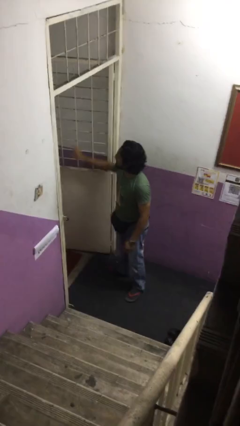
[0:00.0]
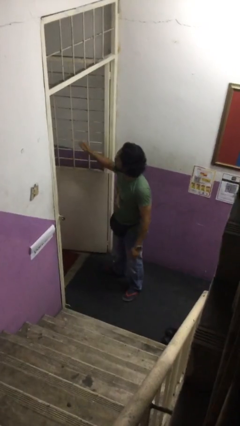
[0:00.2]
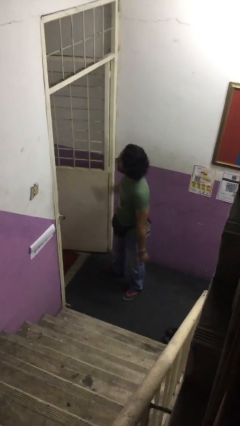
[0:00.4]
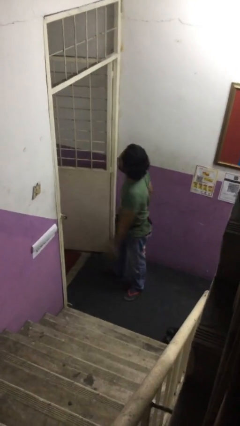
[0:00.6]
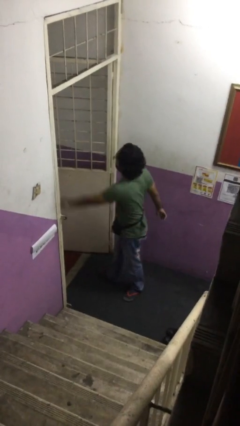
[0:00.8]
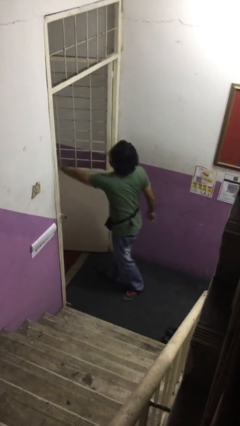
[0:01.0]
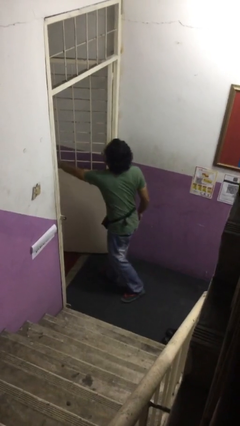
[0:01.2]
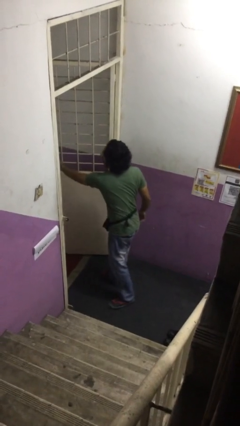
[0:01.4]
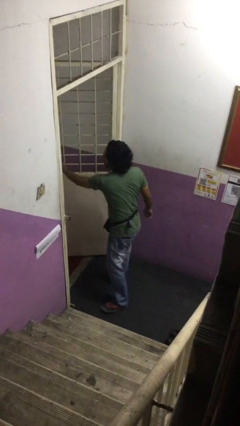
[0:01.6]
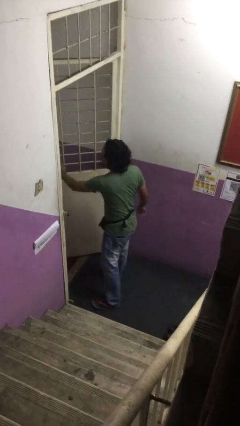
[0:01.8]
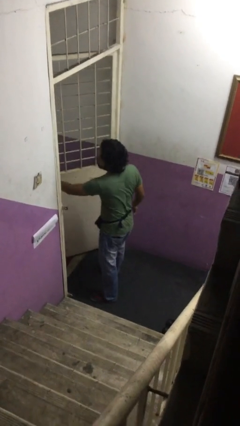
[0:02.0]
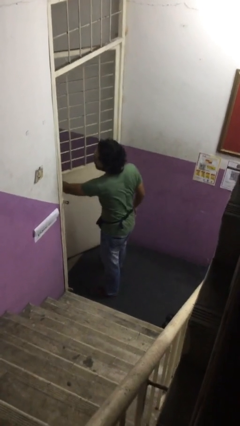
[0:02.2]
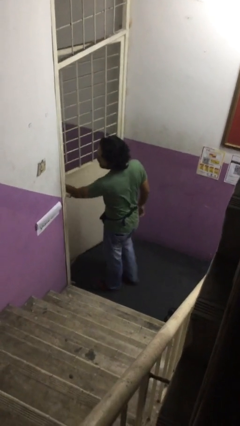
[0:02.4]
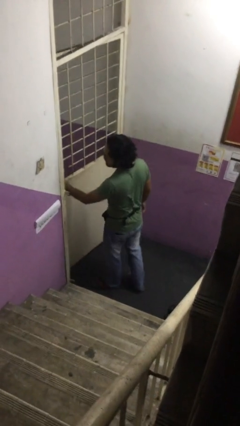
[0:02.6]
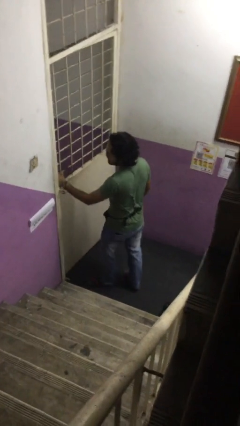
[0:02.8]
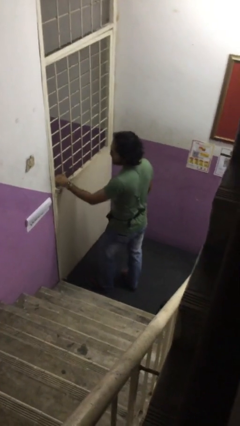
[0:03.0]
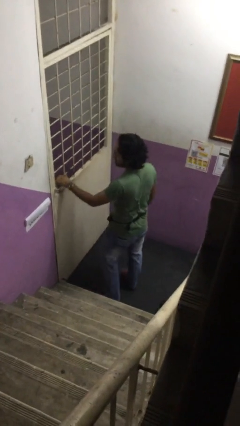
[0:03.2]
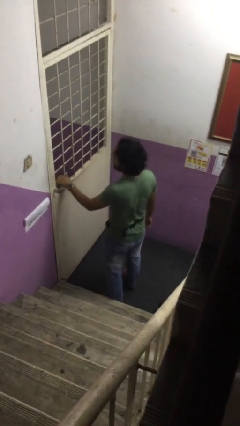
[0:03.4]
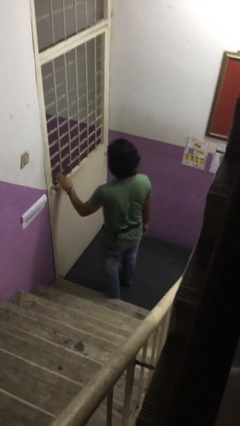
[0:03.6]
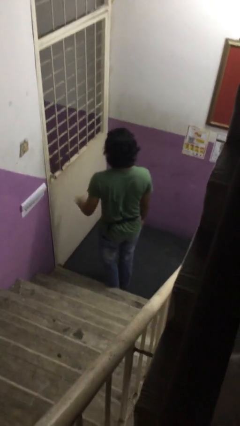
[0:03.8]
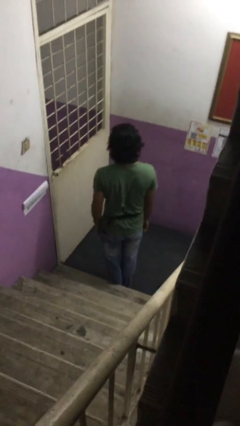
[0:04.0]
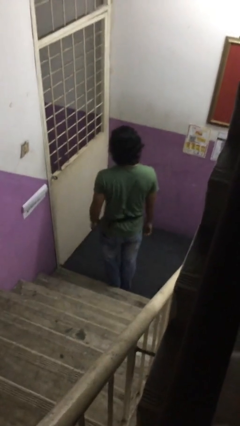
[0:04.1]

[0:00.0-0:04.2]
person closes facility door

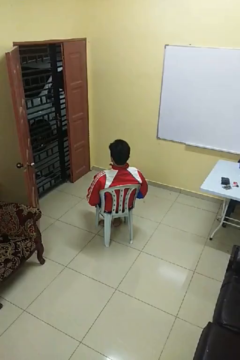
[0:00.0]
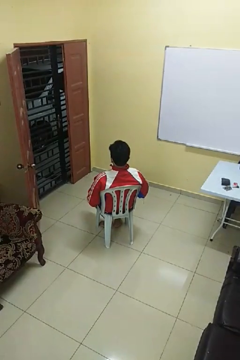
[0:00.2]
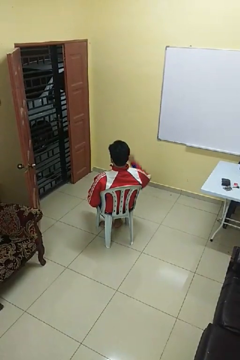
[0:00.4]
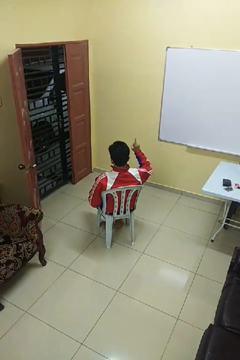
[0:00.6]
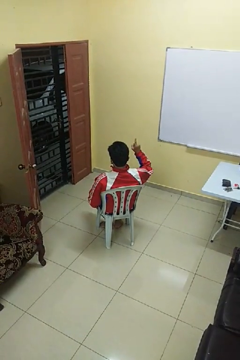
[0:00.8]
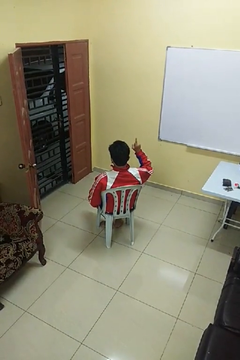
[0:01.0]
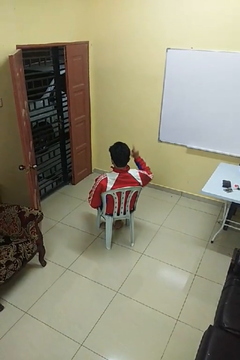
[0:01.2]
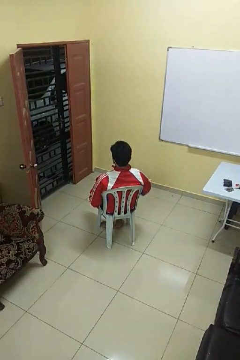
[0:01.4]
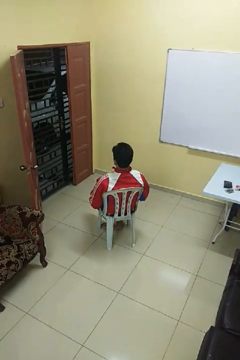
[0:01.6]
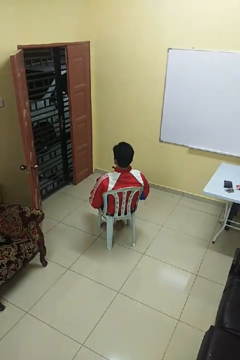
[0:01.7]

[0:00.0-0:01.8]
person gestures number one

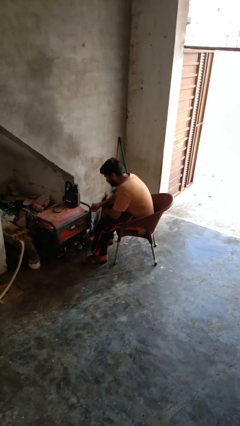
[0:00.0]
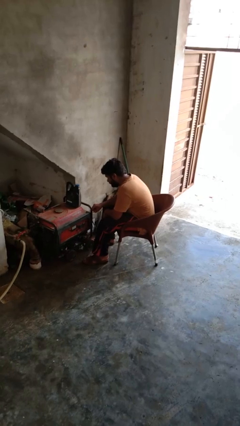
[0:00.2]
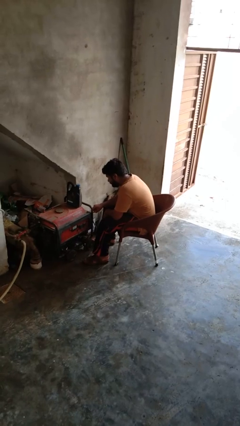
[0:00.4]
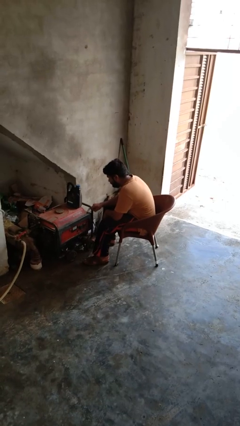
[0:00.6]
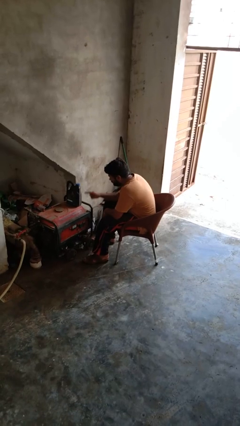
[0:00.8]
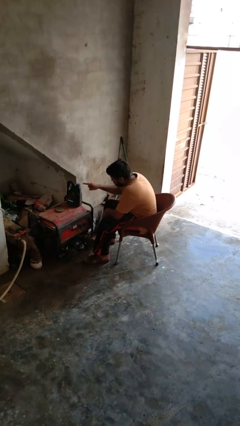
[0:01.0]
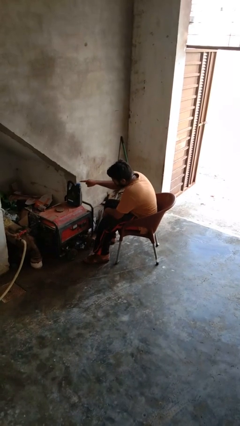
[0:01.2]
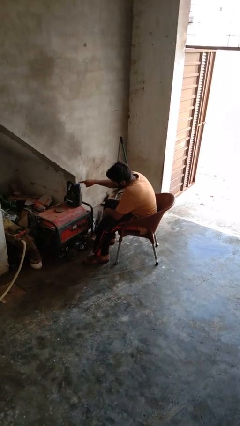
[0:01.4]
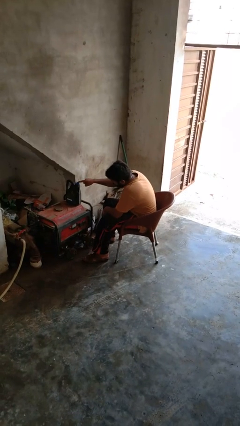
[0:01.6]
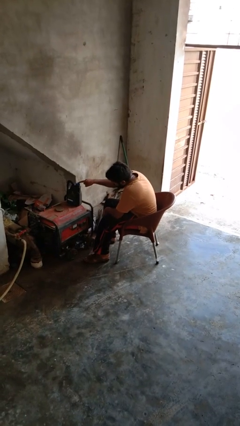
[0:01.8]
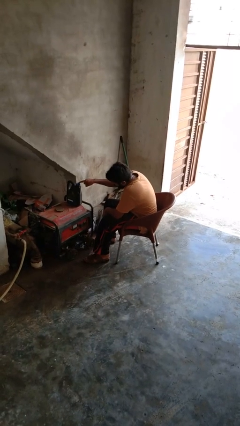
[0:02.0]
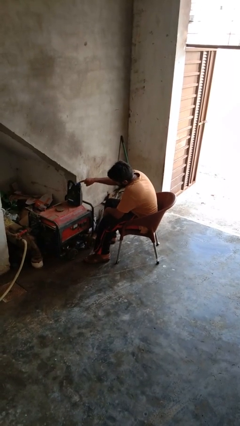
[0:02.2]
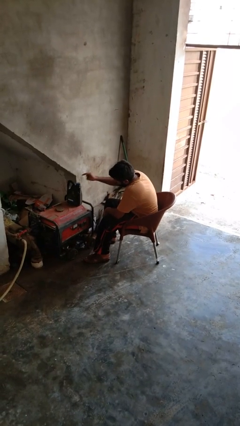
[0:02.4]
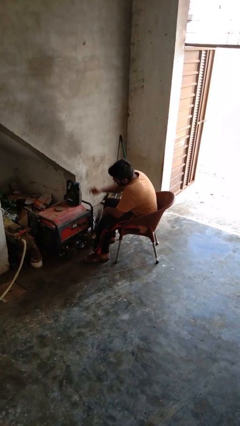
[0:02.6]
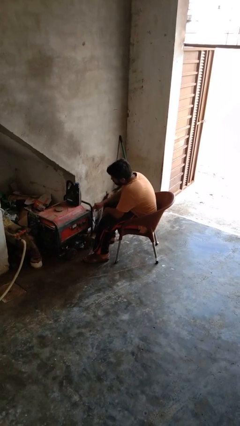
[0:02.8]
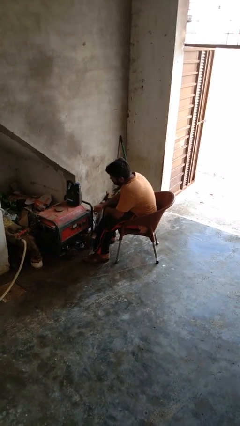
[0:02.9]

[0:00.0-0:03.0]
person taps object with finger

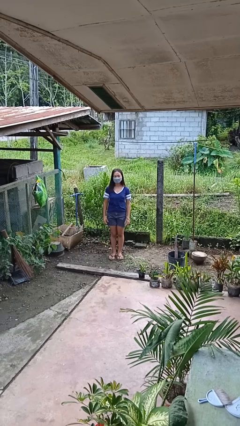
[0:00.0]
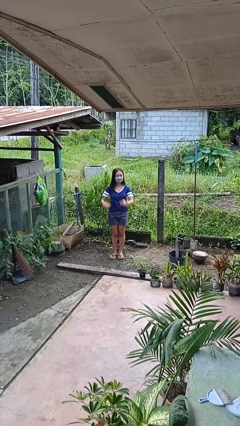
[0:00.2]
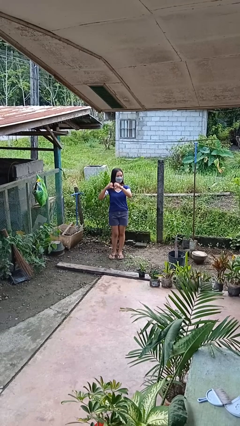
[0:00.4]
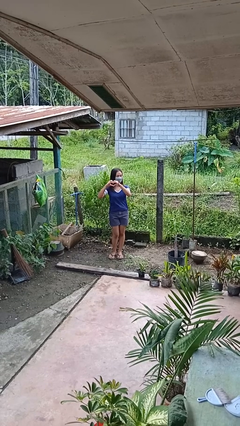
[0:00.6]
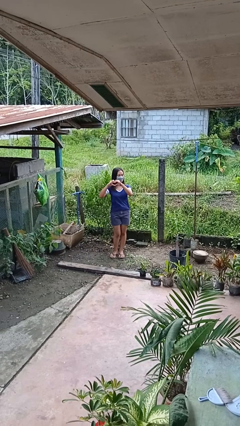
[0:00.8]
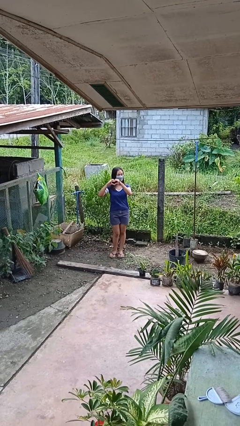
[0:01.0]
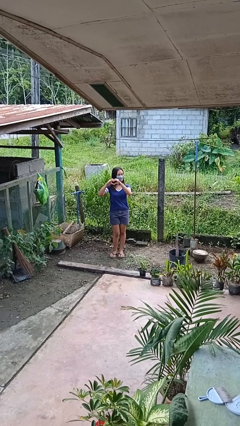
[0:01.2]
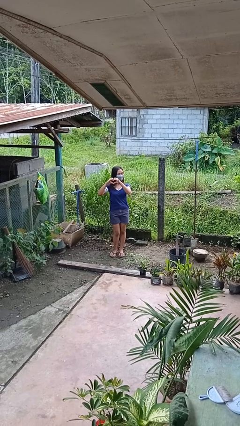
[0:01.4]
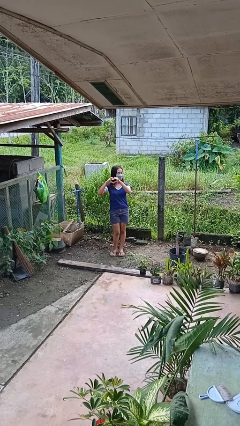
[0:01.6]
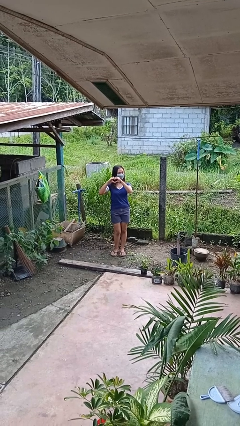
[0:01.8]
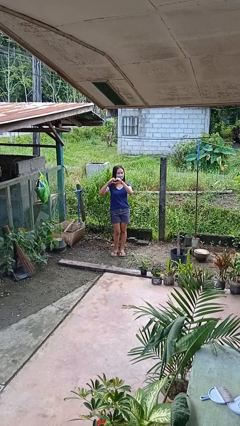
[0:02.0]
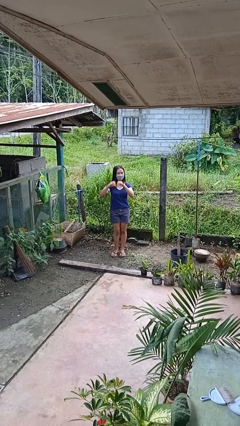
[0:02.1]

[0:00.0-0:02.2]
person gestures heart

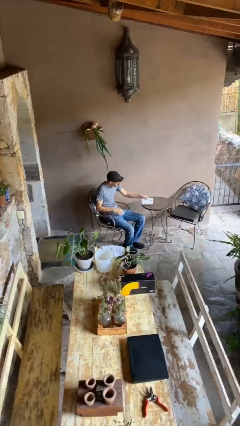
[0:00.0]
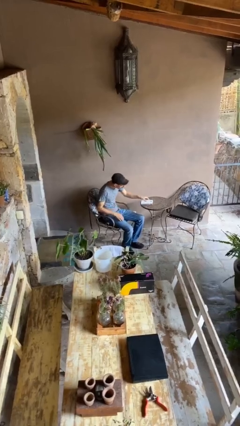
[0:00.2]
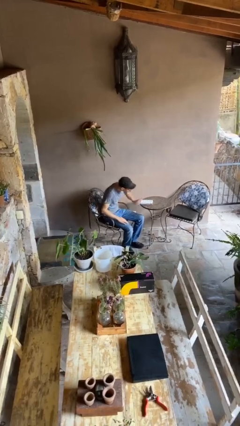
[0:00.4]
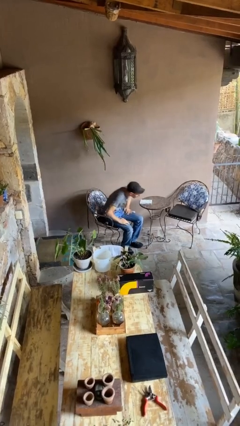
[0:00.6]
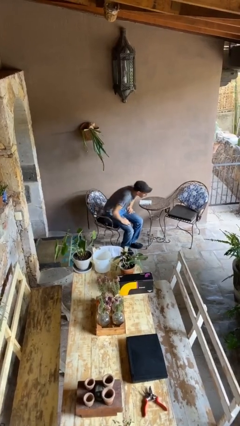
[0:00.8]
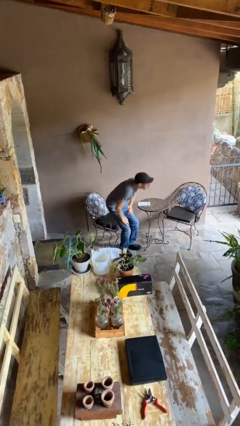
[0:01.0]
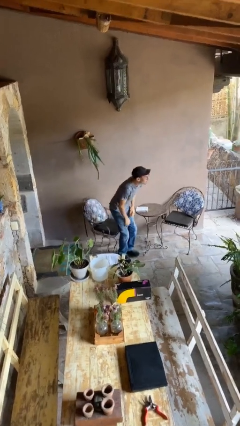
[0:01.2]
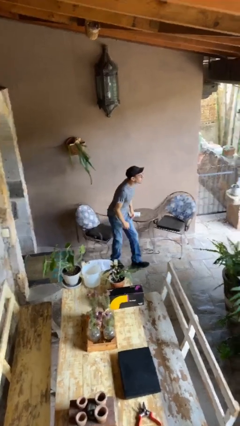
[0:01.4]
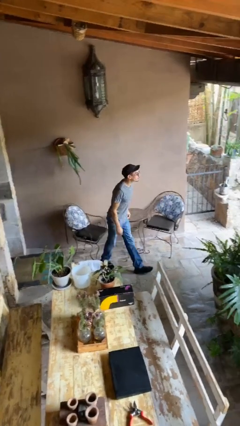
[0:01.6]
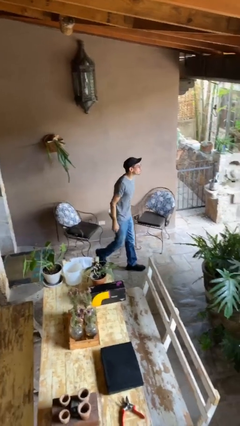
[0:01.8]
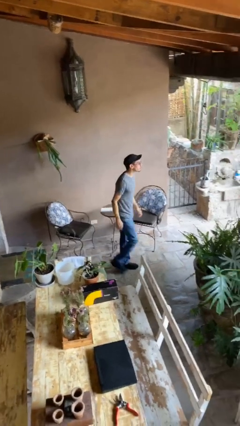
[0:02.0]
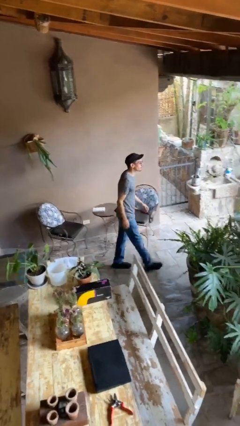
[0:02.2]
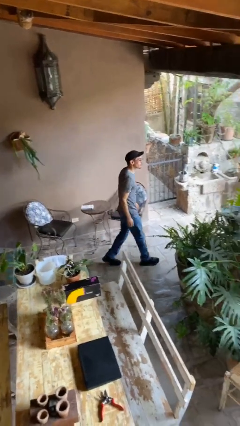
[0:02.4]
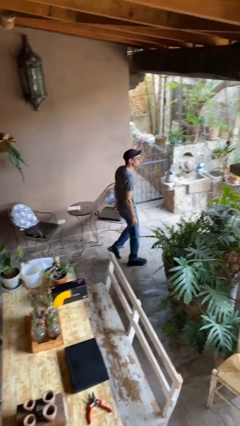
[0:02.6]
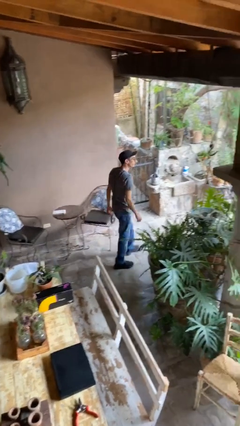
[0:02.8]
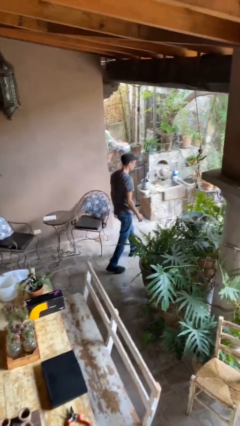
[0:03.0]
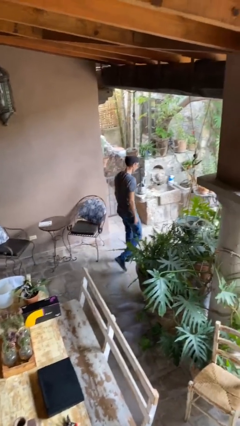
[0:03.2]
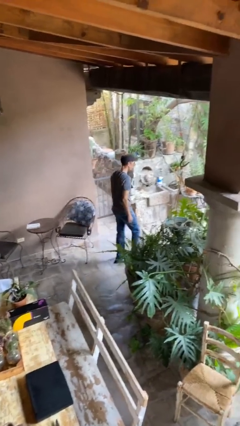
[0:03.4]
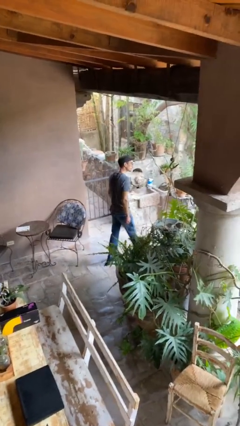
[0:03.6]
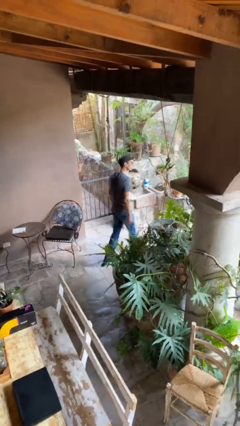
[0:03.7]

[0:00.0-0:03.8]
person stands up

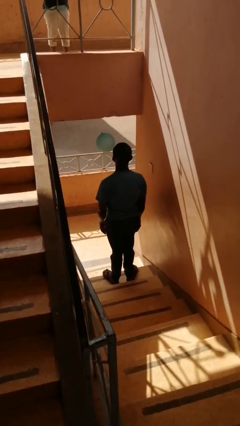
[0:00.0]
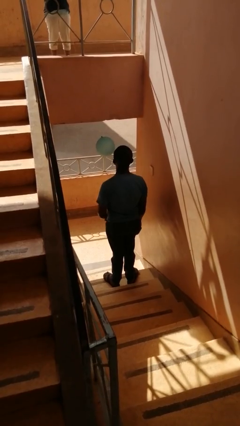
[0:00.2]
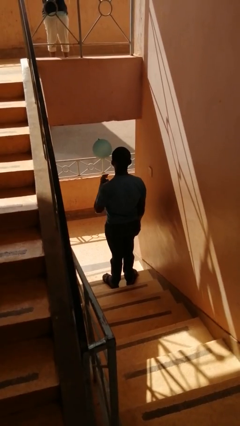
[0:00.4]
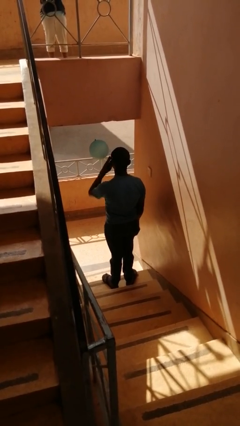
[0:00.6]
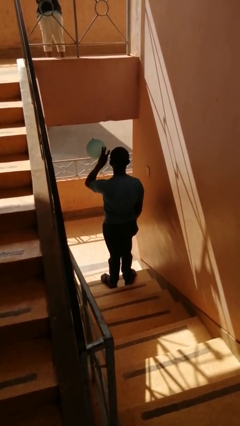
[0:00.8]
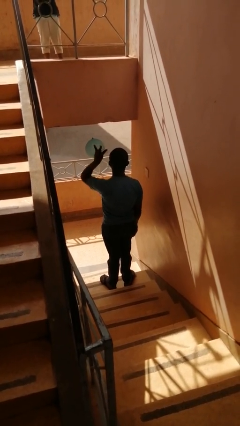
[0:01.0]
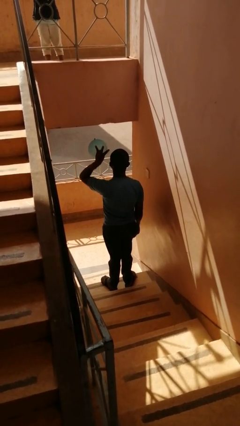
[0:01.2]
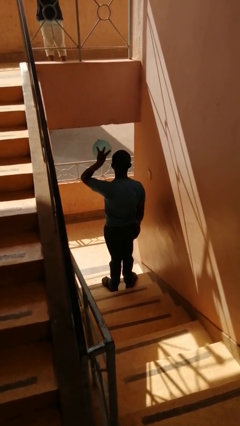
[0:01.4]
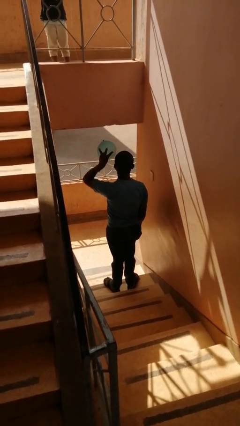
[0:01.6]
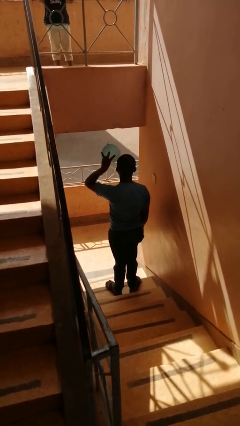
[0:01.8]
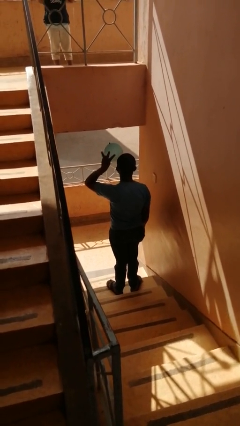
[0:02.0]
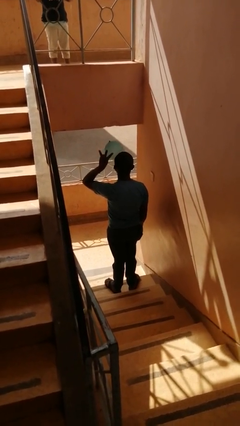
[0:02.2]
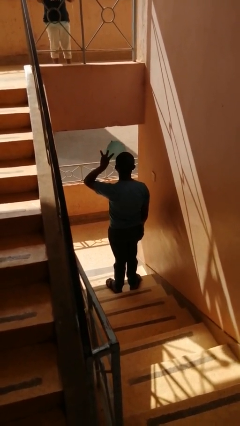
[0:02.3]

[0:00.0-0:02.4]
person gestures number three

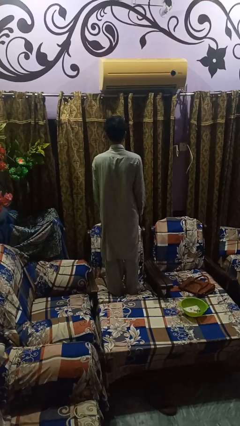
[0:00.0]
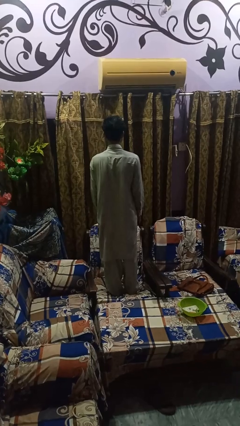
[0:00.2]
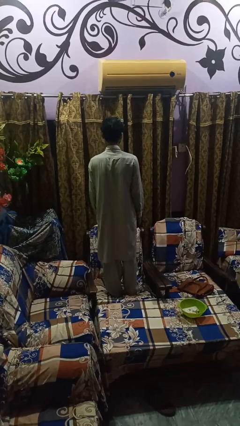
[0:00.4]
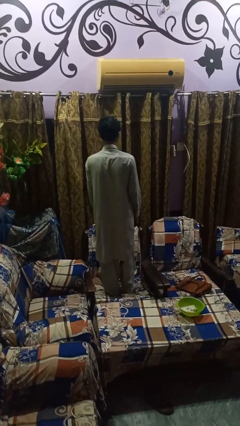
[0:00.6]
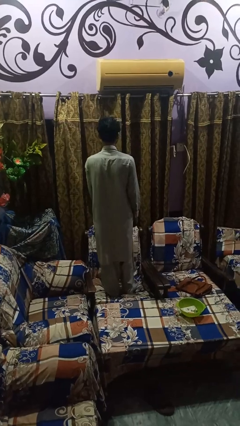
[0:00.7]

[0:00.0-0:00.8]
person opens curtains
